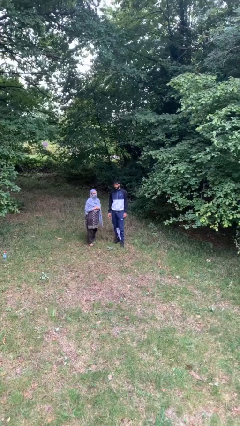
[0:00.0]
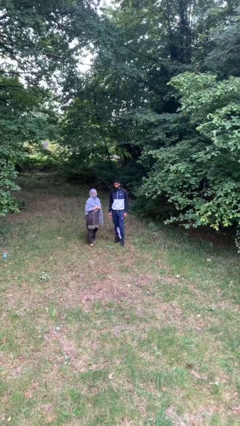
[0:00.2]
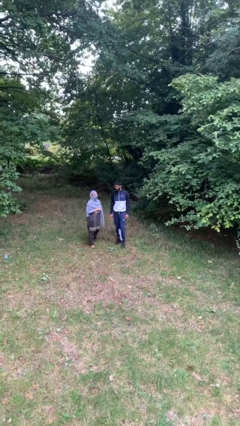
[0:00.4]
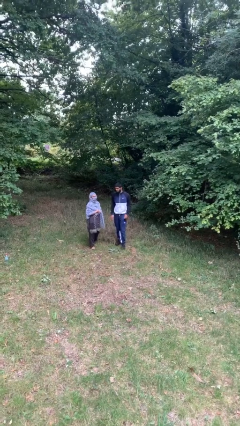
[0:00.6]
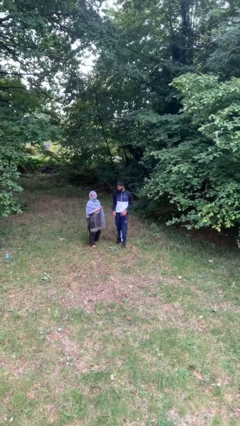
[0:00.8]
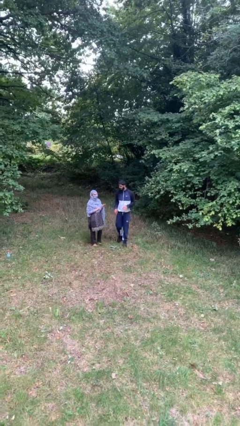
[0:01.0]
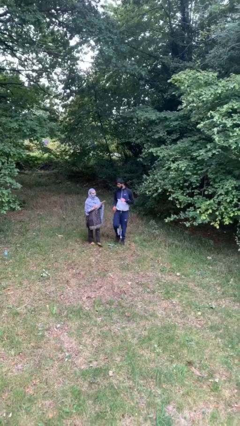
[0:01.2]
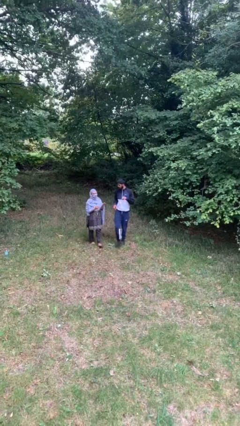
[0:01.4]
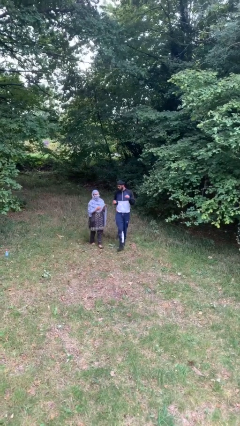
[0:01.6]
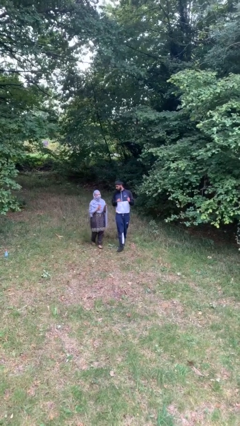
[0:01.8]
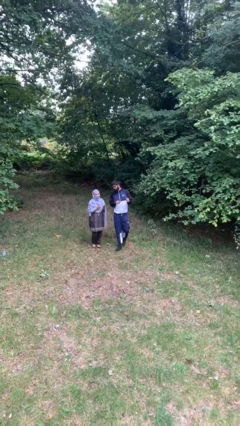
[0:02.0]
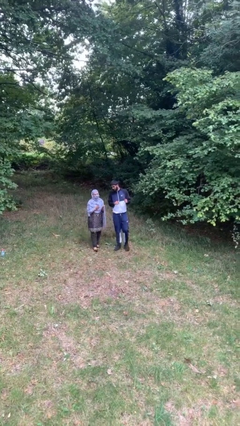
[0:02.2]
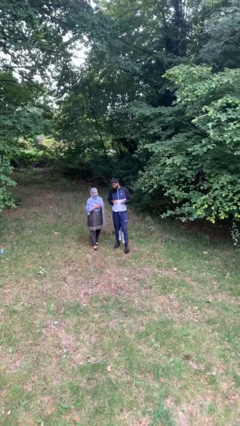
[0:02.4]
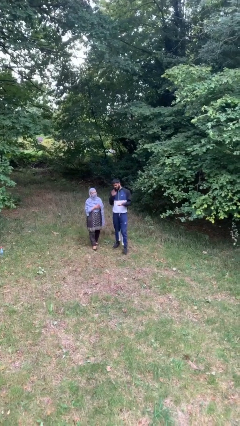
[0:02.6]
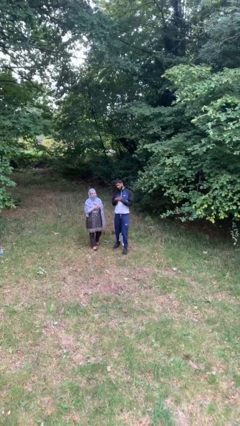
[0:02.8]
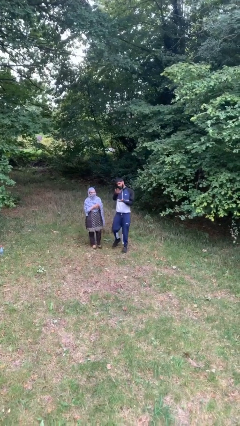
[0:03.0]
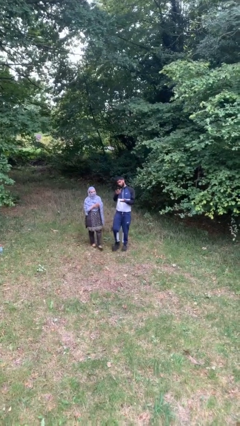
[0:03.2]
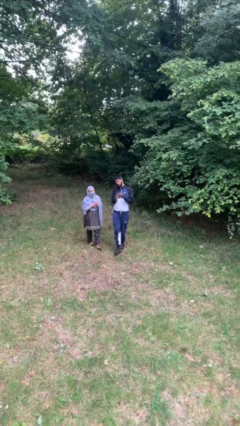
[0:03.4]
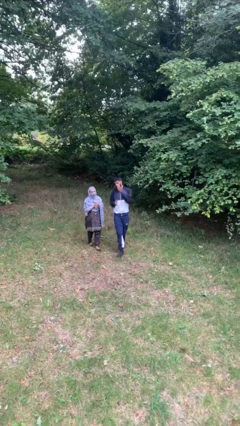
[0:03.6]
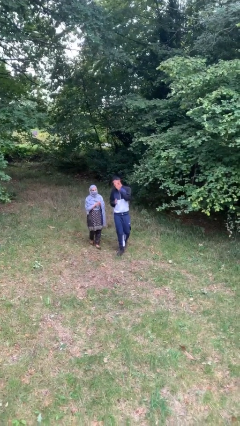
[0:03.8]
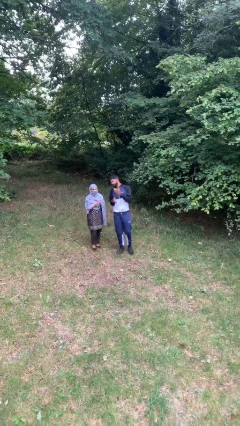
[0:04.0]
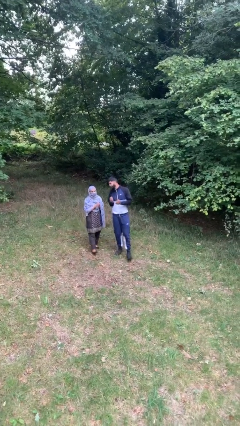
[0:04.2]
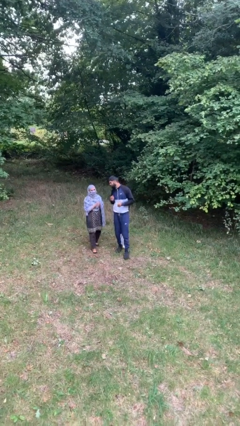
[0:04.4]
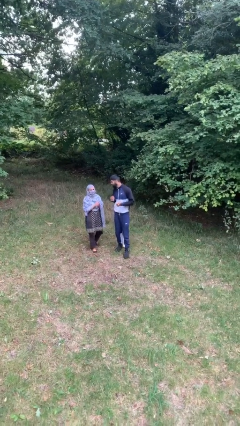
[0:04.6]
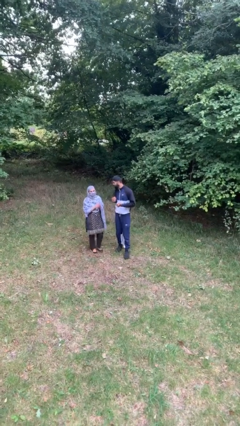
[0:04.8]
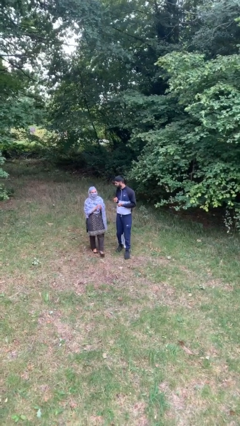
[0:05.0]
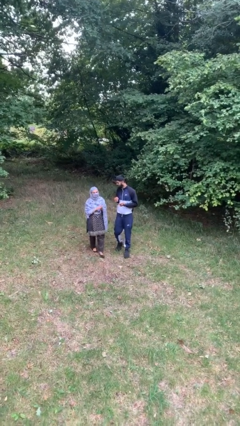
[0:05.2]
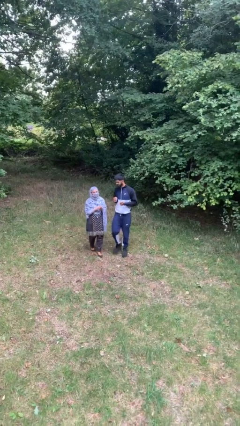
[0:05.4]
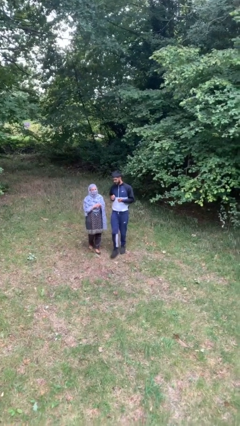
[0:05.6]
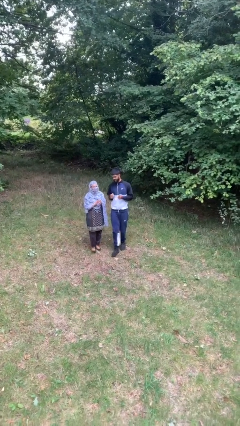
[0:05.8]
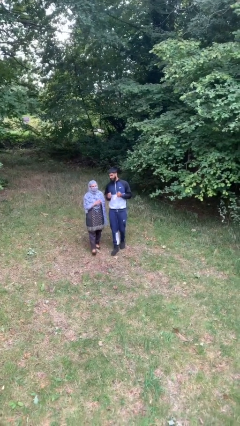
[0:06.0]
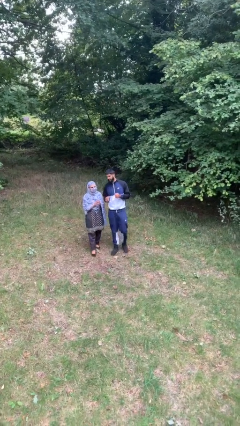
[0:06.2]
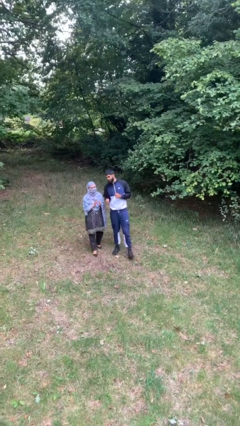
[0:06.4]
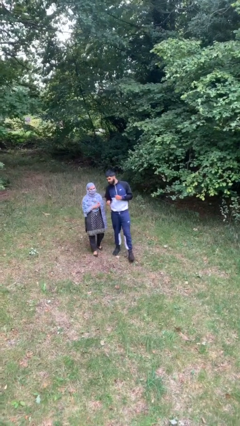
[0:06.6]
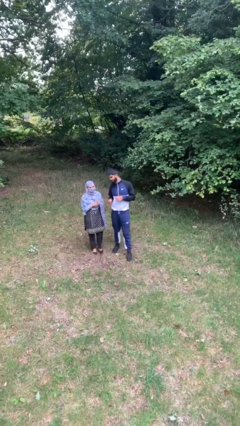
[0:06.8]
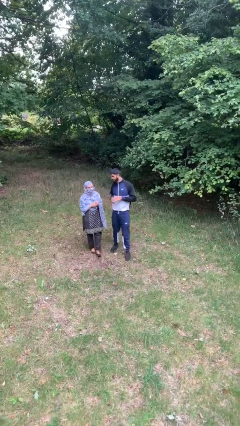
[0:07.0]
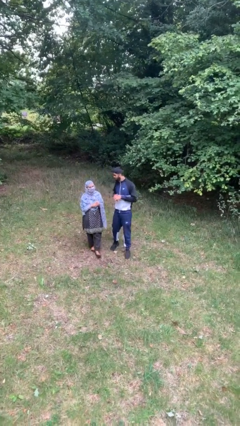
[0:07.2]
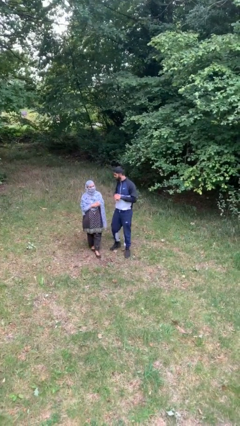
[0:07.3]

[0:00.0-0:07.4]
person talks to person

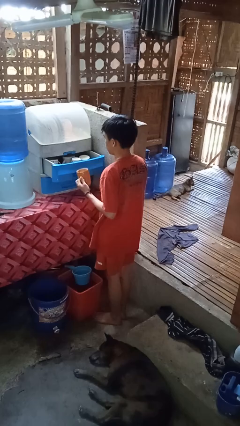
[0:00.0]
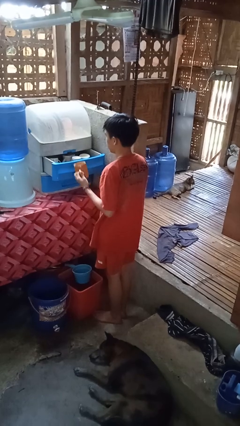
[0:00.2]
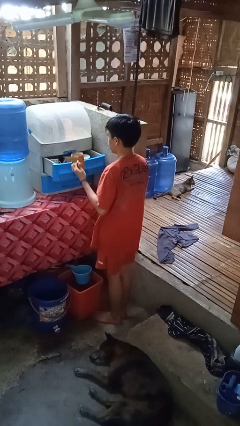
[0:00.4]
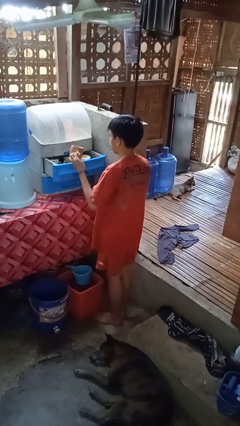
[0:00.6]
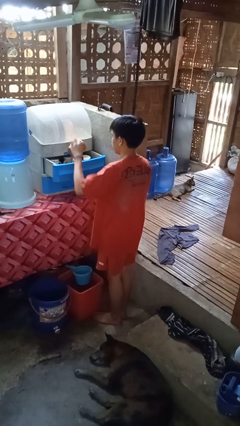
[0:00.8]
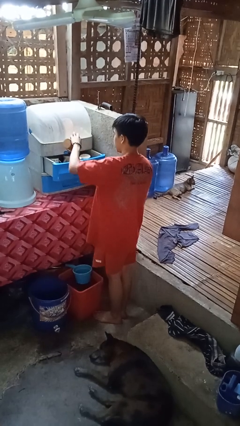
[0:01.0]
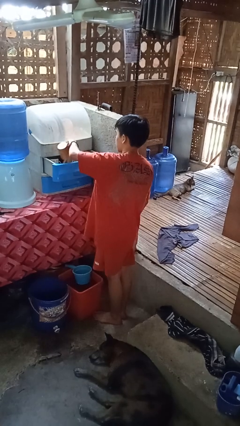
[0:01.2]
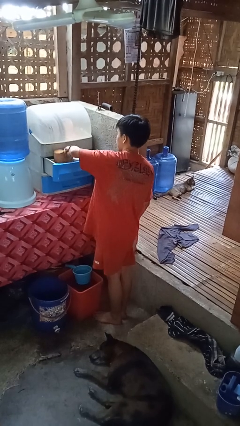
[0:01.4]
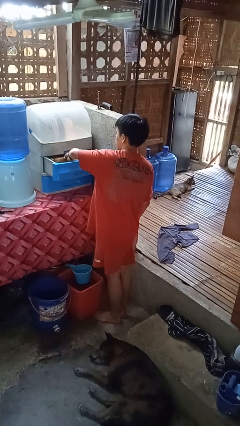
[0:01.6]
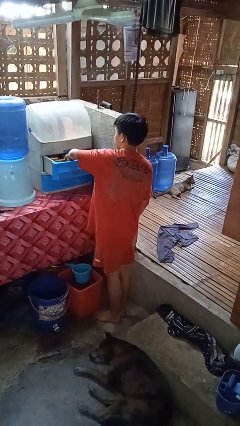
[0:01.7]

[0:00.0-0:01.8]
person puts down object into cabinet

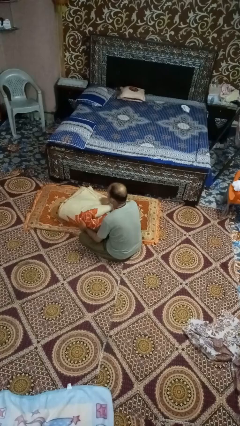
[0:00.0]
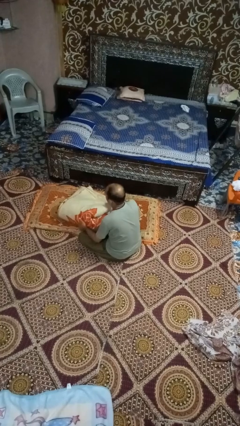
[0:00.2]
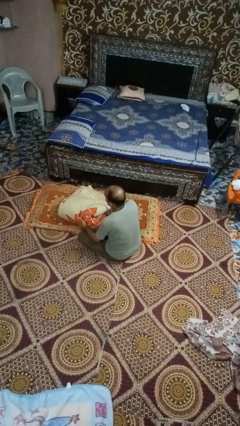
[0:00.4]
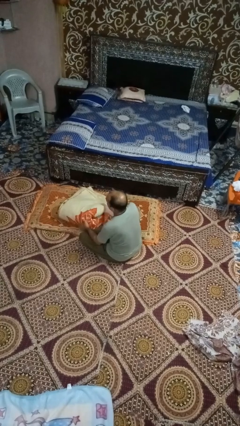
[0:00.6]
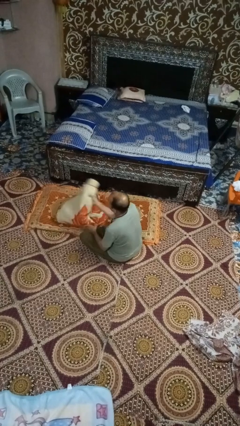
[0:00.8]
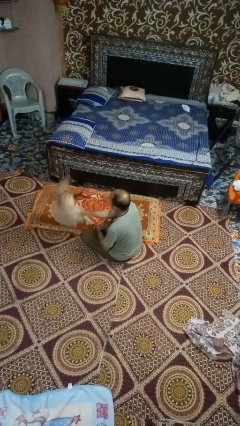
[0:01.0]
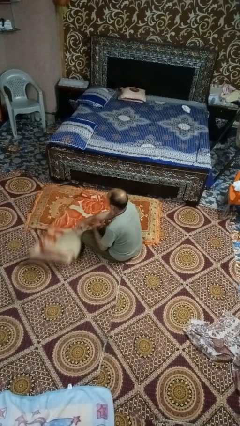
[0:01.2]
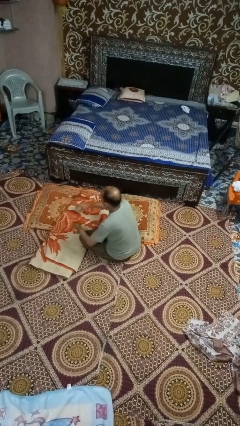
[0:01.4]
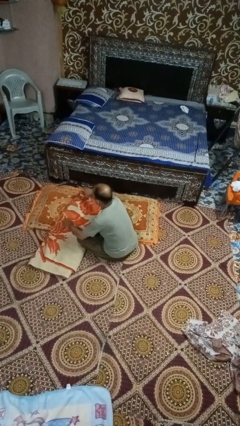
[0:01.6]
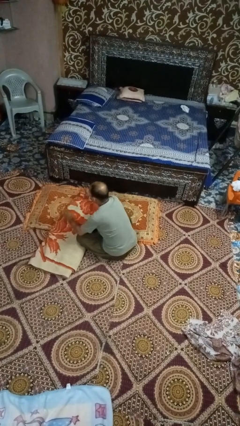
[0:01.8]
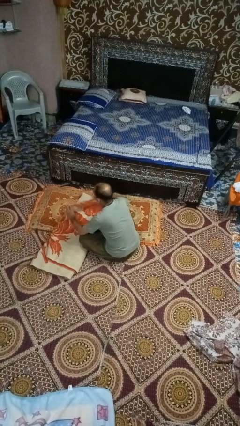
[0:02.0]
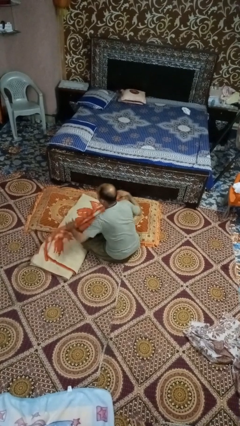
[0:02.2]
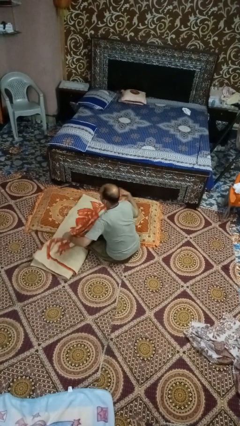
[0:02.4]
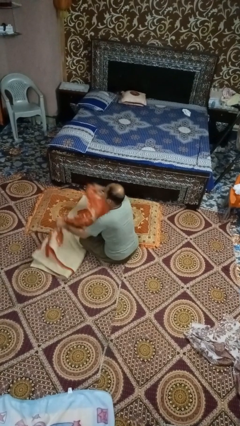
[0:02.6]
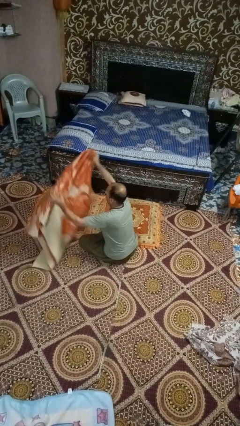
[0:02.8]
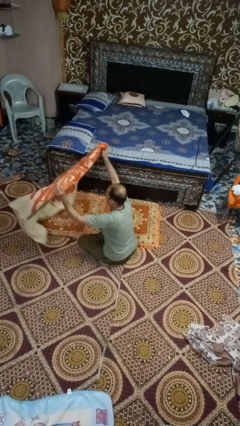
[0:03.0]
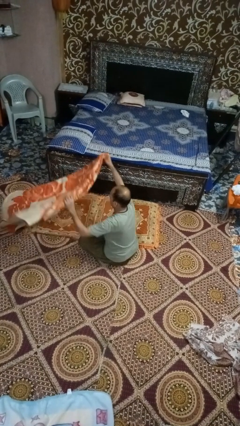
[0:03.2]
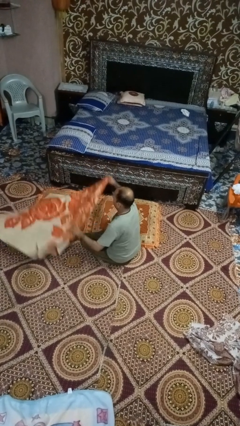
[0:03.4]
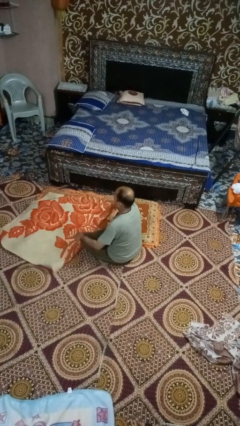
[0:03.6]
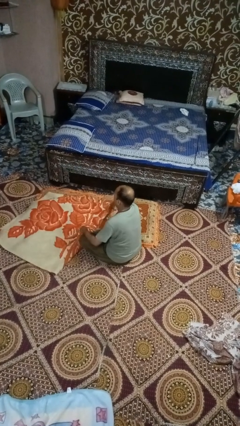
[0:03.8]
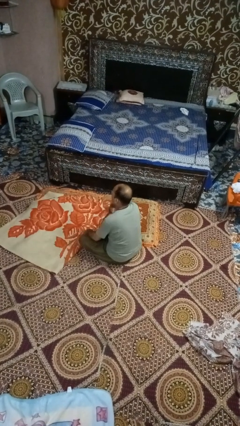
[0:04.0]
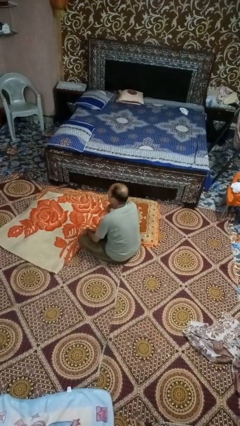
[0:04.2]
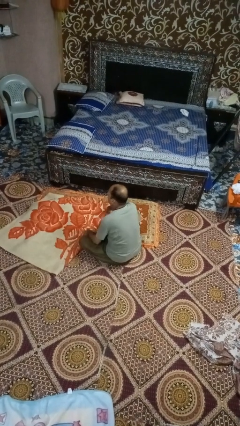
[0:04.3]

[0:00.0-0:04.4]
person unfolds blanket

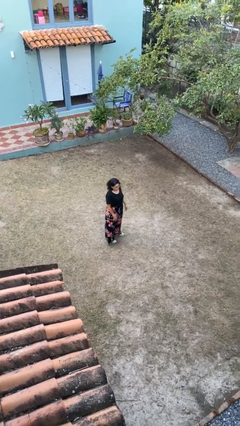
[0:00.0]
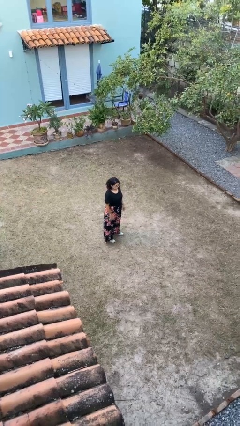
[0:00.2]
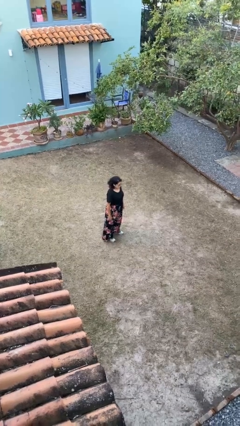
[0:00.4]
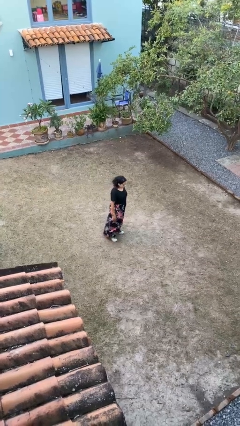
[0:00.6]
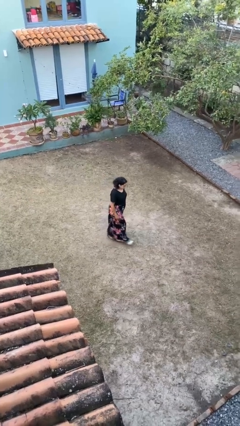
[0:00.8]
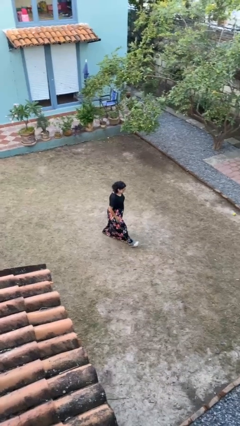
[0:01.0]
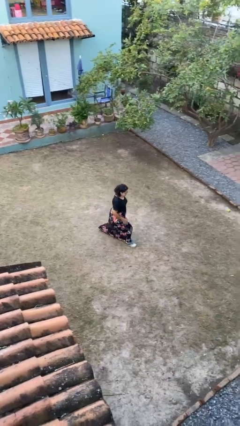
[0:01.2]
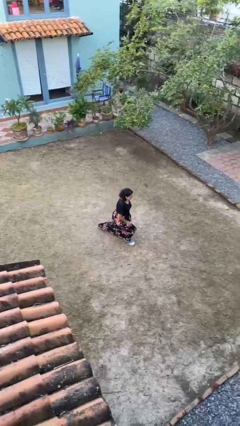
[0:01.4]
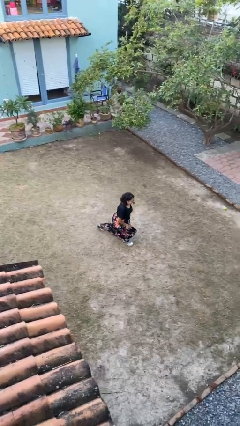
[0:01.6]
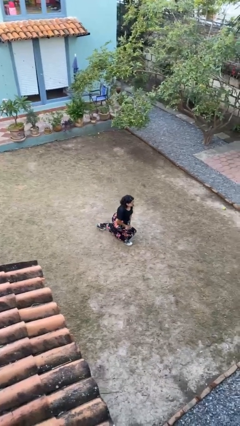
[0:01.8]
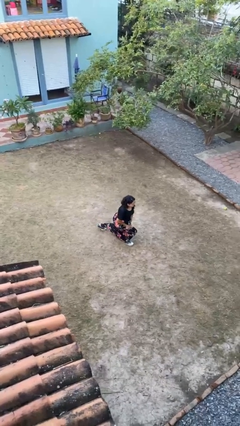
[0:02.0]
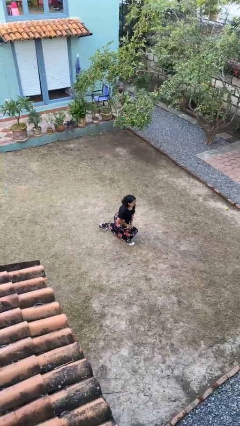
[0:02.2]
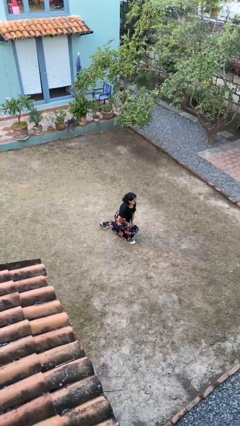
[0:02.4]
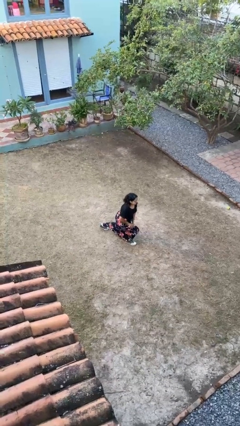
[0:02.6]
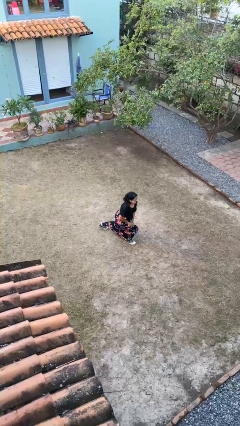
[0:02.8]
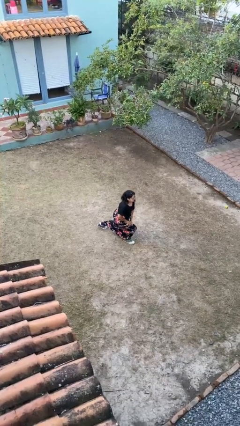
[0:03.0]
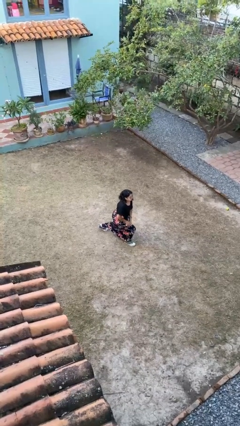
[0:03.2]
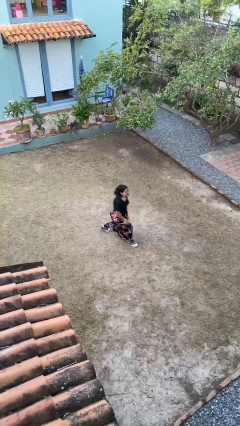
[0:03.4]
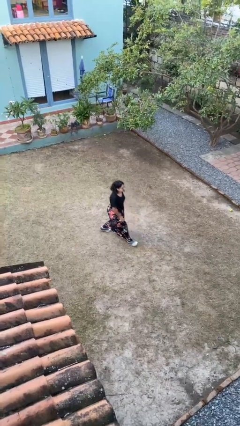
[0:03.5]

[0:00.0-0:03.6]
person exercises with lunges

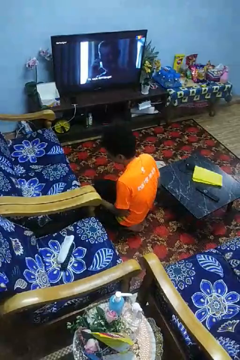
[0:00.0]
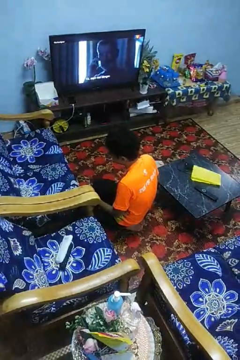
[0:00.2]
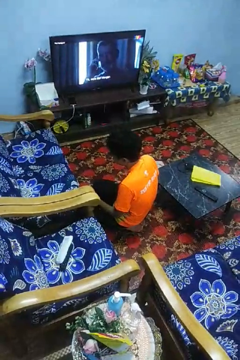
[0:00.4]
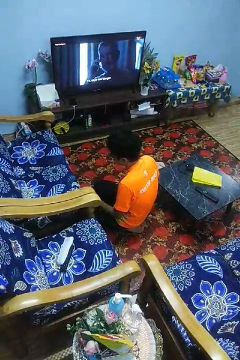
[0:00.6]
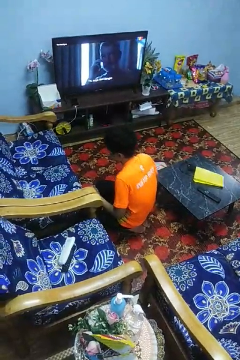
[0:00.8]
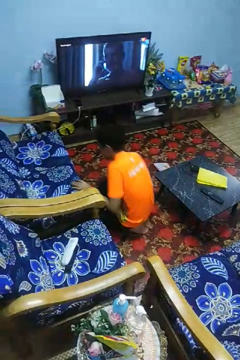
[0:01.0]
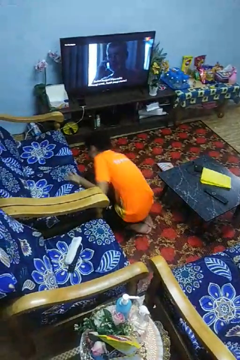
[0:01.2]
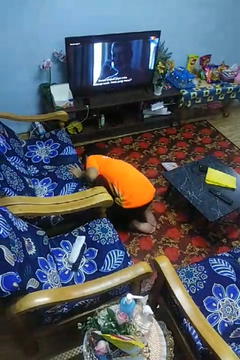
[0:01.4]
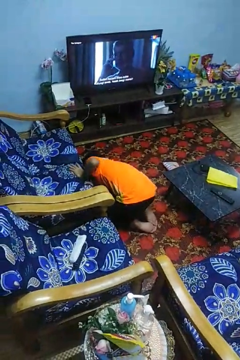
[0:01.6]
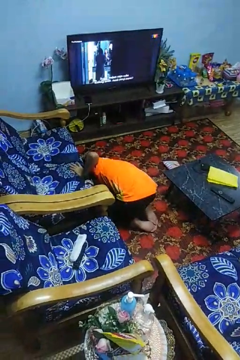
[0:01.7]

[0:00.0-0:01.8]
person searches under couch
